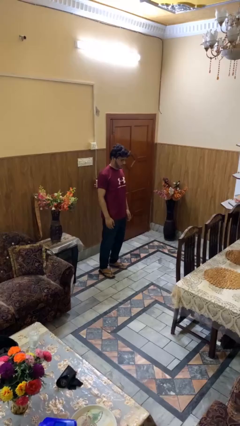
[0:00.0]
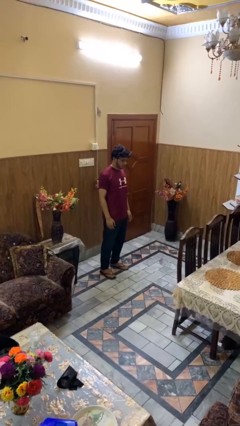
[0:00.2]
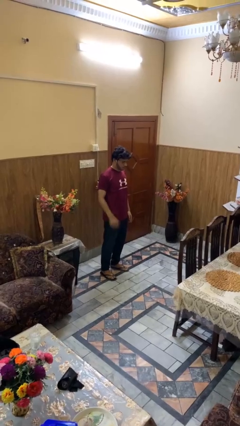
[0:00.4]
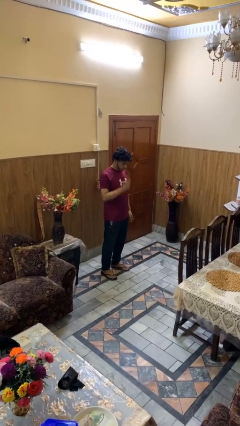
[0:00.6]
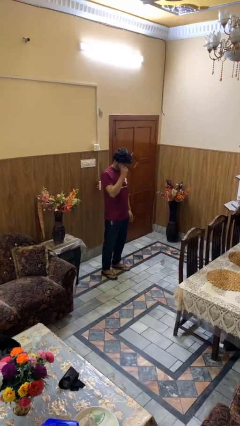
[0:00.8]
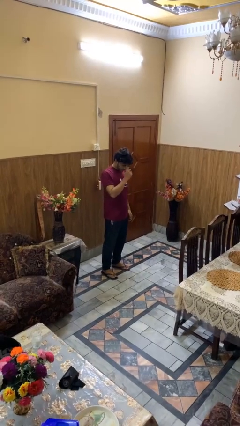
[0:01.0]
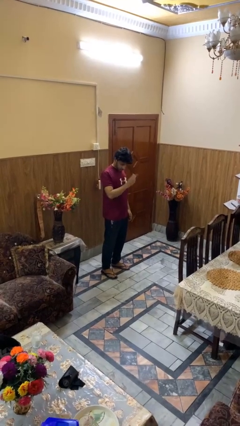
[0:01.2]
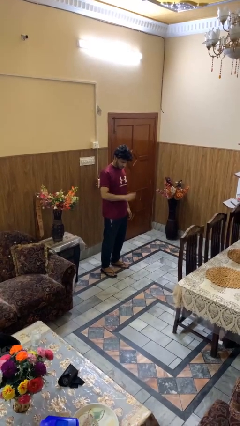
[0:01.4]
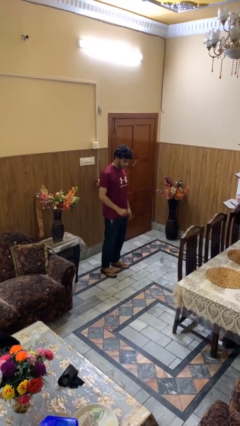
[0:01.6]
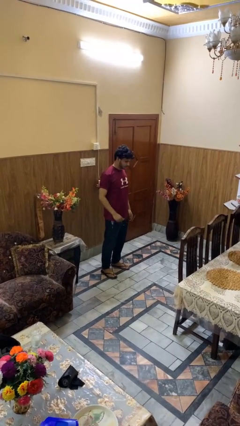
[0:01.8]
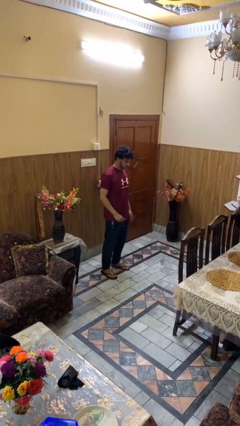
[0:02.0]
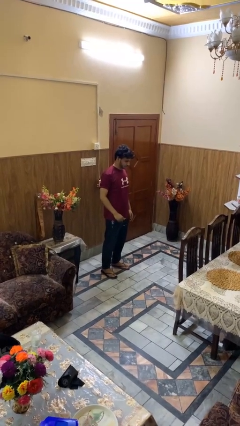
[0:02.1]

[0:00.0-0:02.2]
person takes off glasses

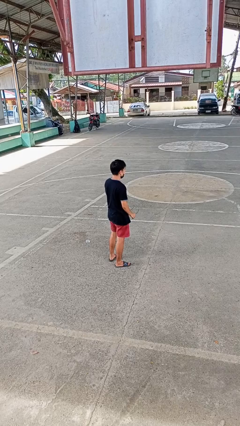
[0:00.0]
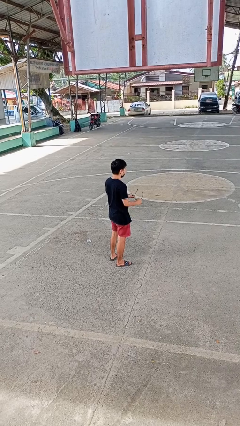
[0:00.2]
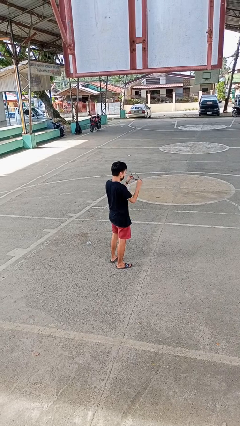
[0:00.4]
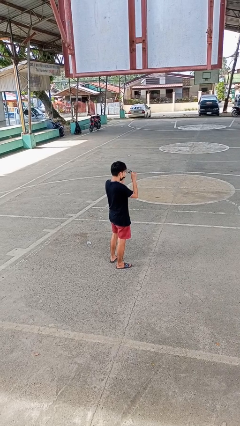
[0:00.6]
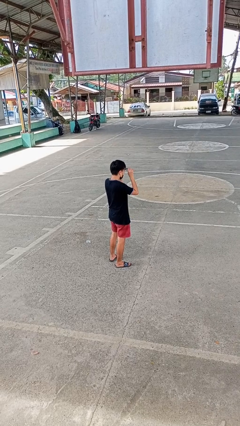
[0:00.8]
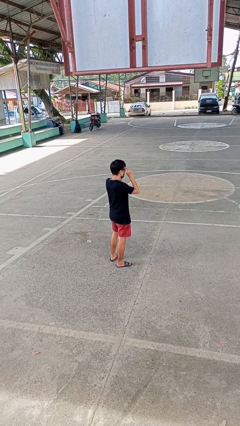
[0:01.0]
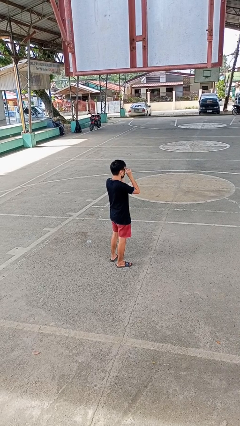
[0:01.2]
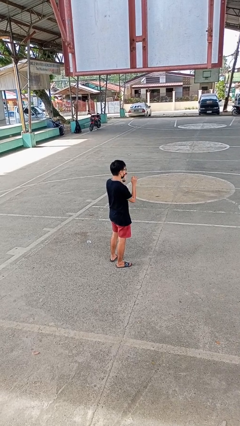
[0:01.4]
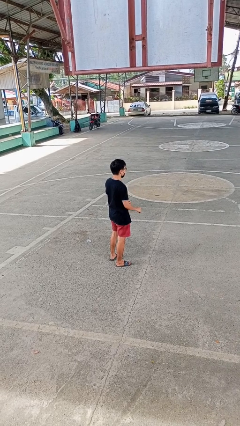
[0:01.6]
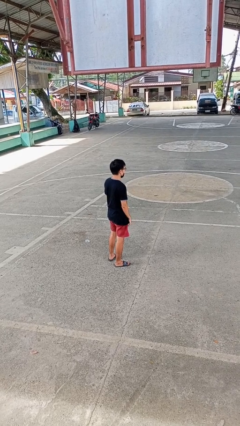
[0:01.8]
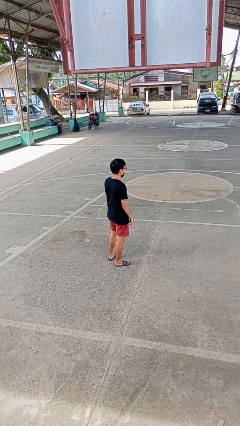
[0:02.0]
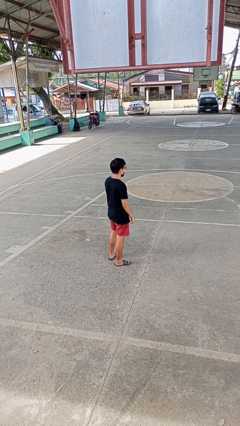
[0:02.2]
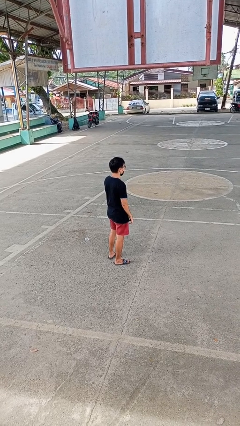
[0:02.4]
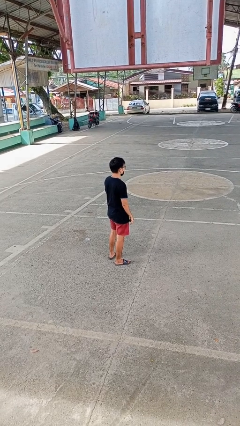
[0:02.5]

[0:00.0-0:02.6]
person puts on glasses

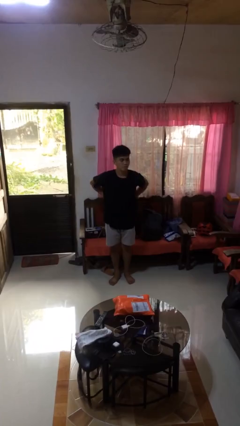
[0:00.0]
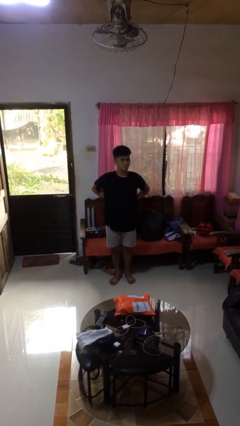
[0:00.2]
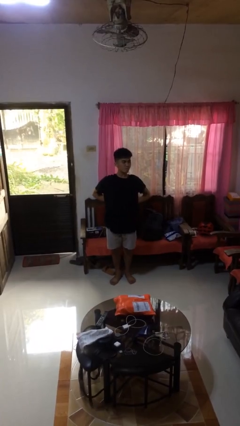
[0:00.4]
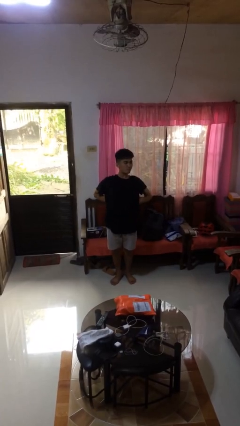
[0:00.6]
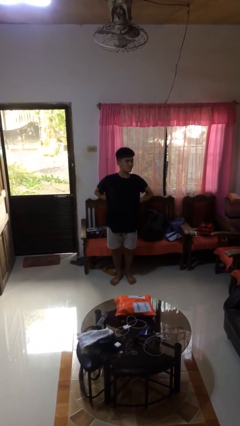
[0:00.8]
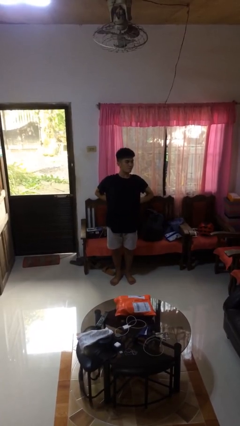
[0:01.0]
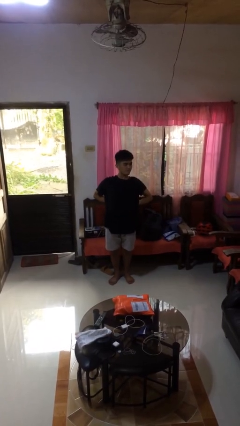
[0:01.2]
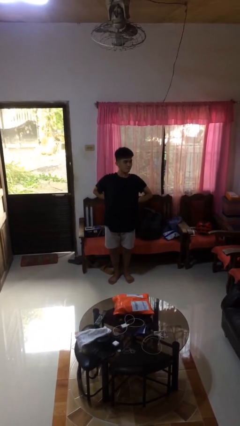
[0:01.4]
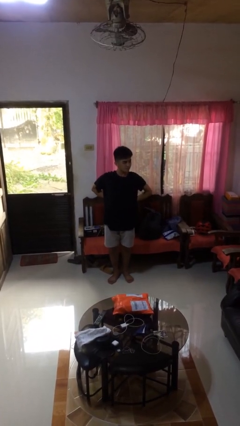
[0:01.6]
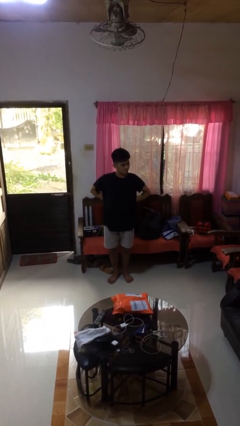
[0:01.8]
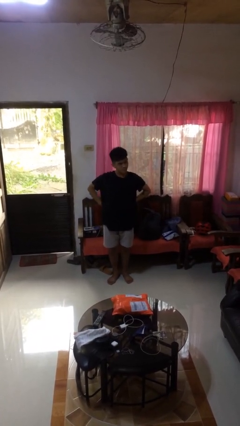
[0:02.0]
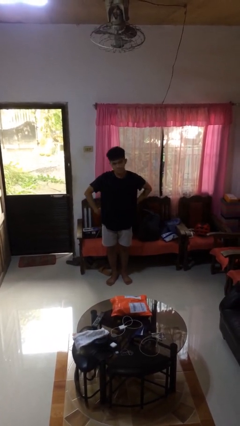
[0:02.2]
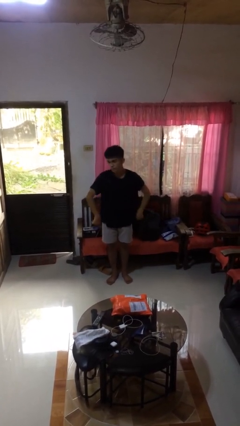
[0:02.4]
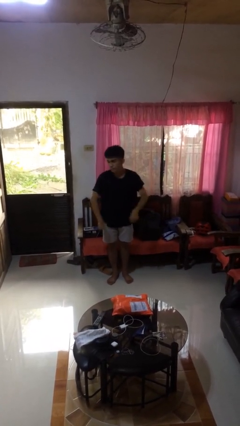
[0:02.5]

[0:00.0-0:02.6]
person stretches back

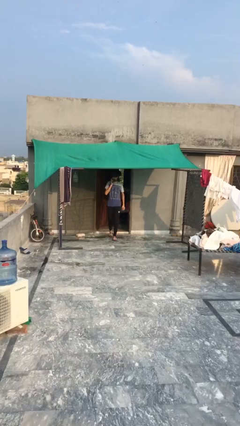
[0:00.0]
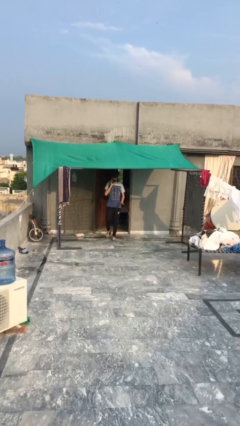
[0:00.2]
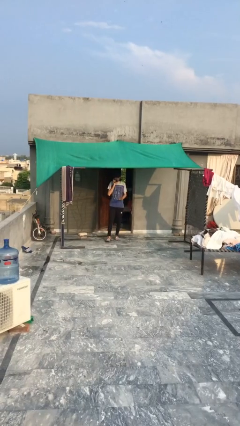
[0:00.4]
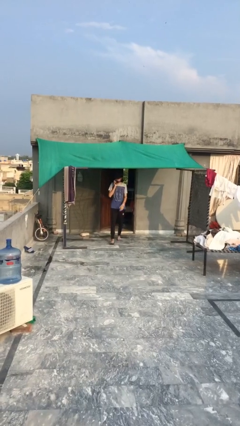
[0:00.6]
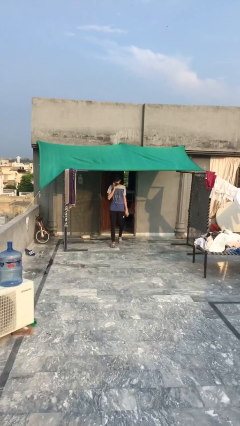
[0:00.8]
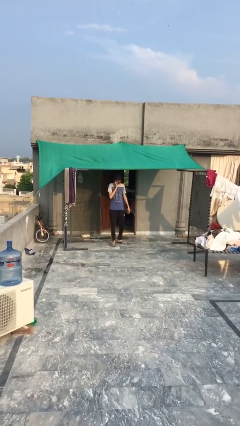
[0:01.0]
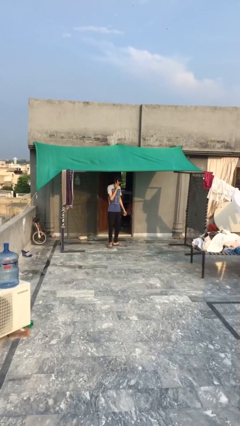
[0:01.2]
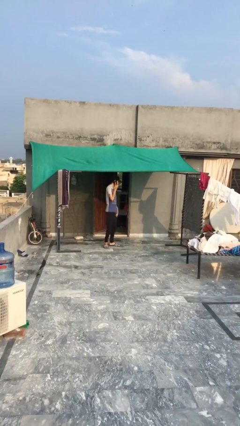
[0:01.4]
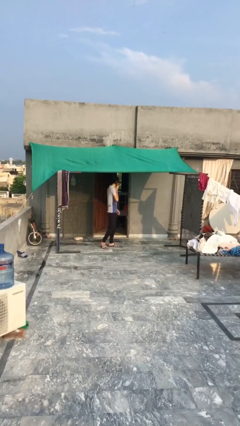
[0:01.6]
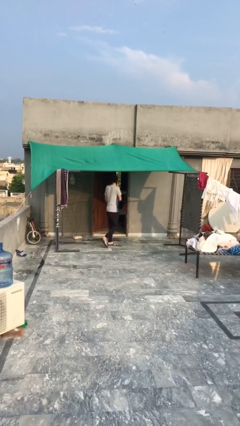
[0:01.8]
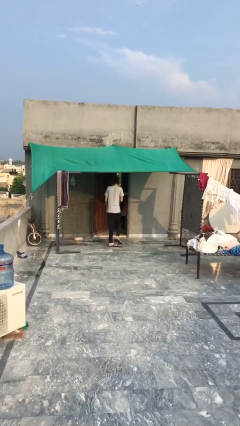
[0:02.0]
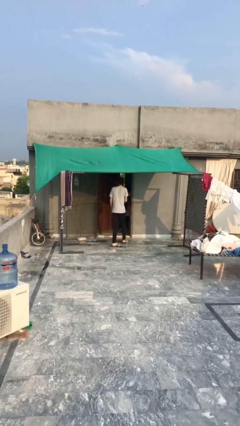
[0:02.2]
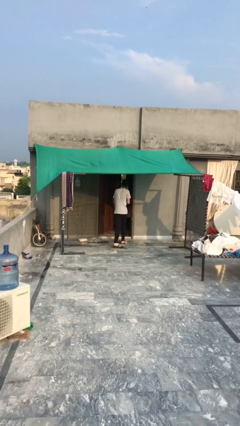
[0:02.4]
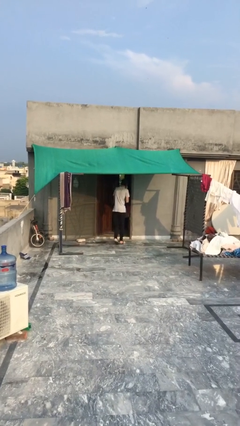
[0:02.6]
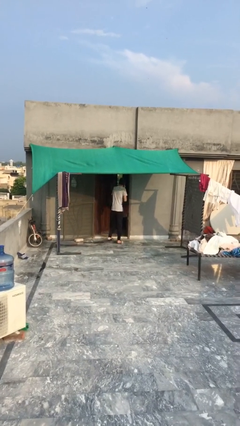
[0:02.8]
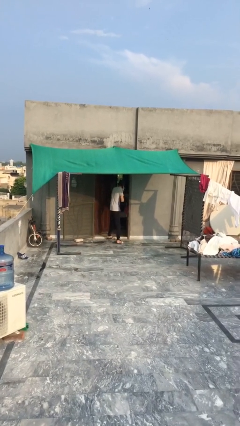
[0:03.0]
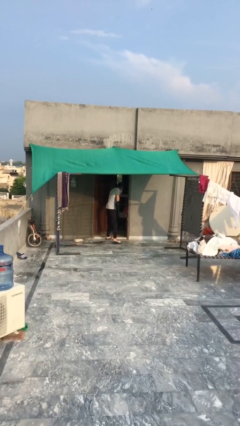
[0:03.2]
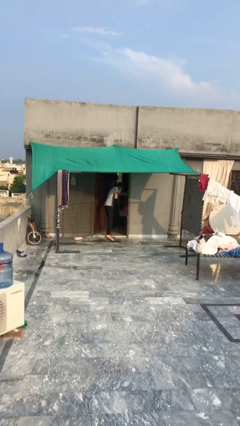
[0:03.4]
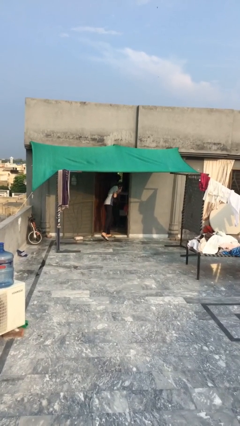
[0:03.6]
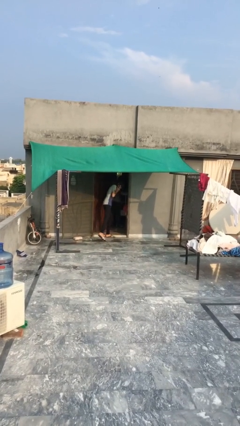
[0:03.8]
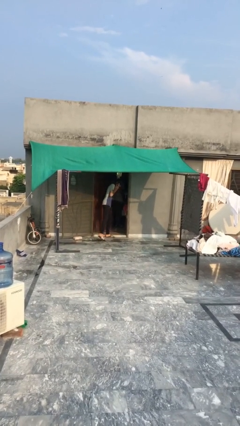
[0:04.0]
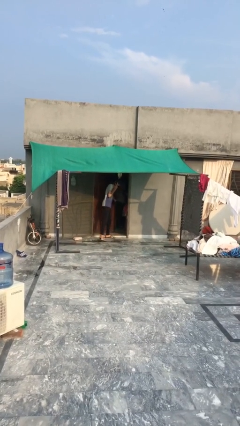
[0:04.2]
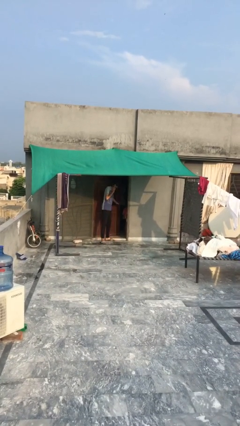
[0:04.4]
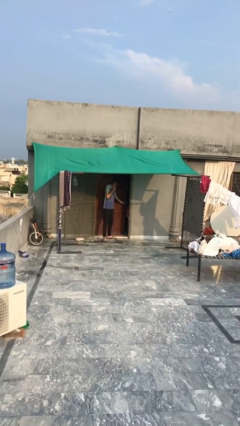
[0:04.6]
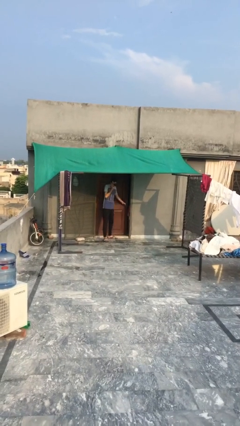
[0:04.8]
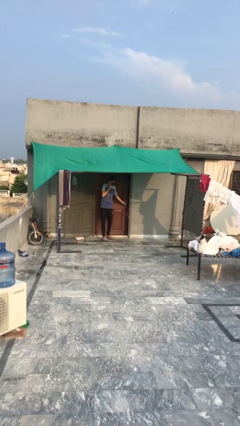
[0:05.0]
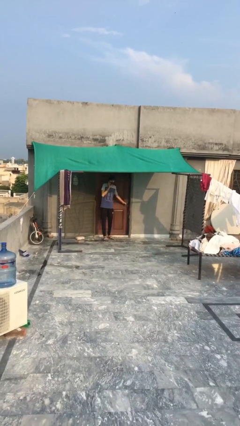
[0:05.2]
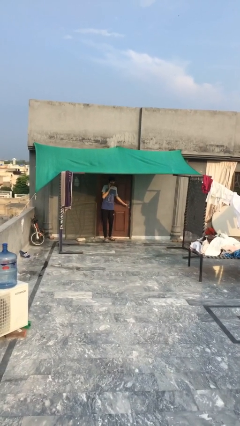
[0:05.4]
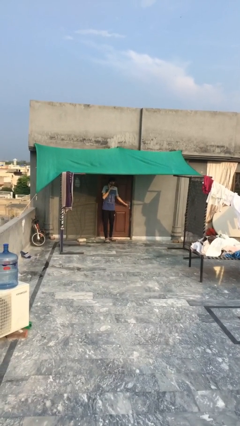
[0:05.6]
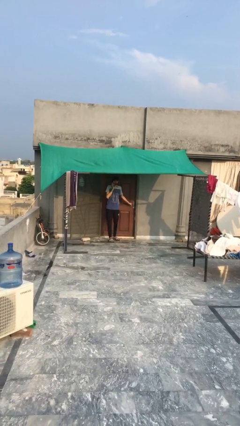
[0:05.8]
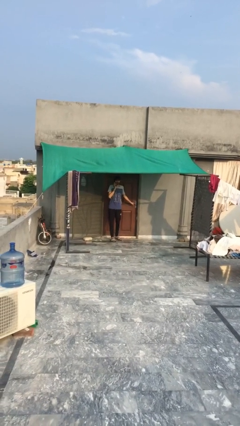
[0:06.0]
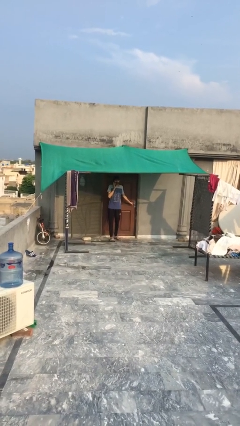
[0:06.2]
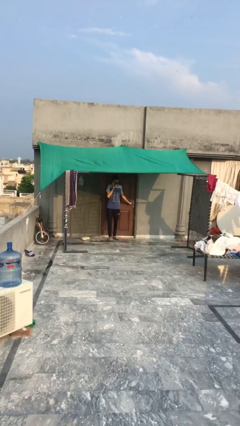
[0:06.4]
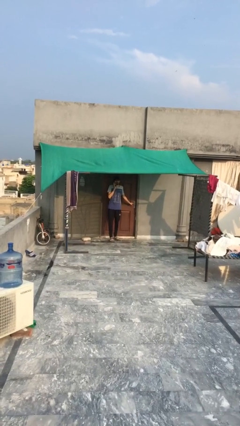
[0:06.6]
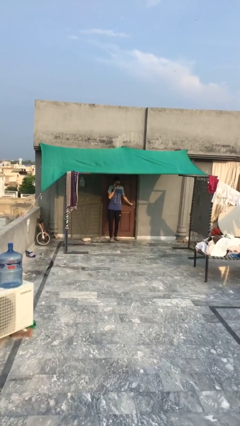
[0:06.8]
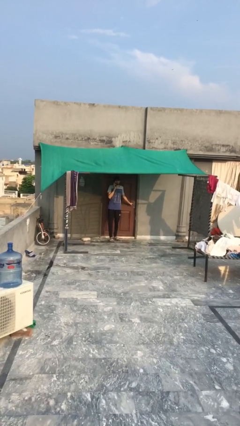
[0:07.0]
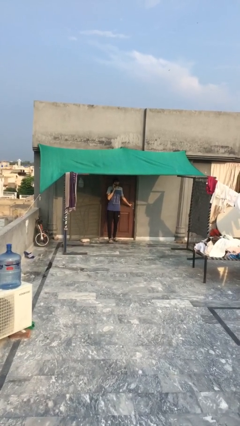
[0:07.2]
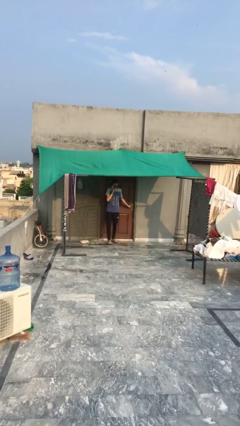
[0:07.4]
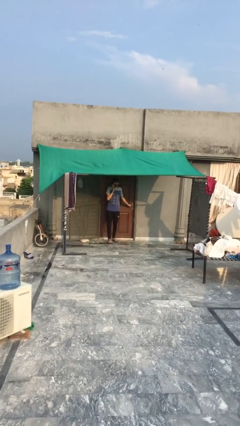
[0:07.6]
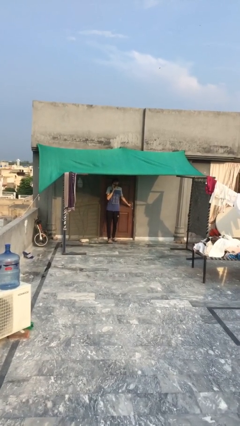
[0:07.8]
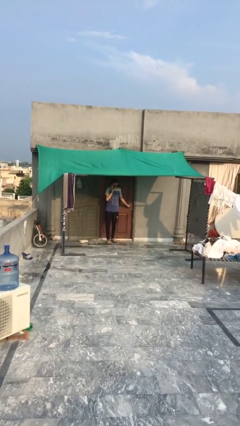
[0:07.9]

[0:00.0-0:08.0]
person closes facility door

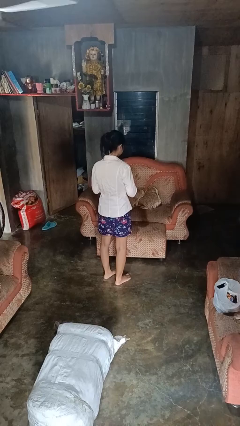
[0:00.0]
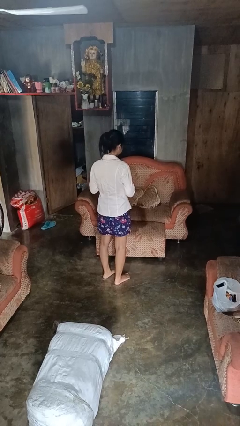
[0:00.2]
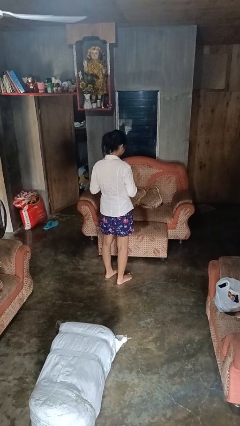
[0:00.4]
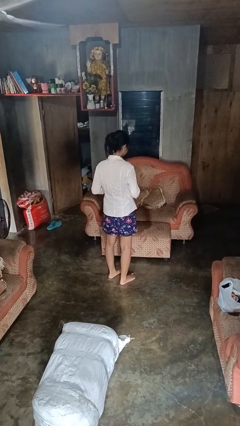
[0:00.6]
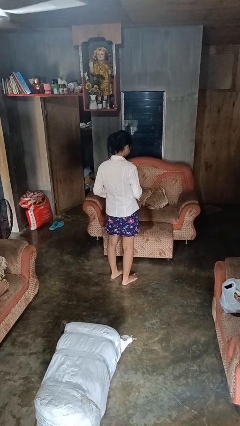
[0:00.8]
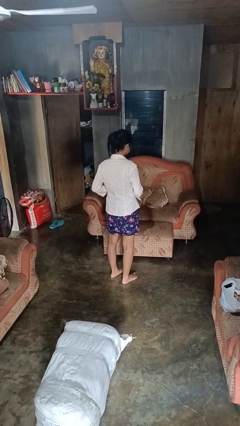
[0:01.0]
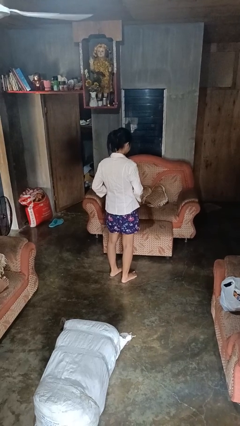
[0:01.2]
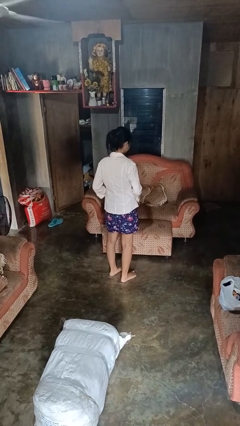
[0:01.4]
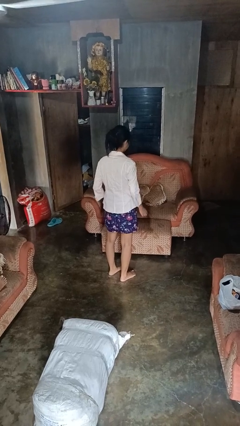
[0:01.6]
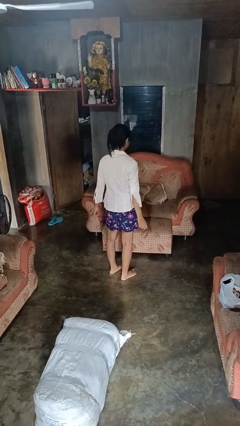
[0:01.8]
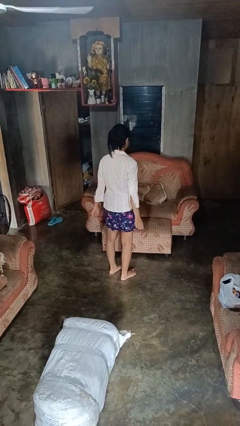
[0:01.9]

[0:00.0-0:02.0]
person unbuttons shirt

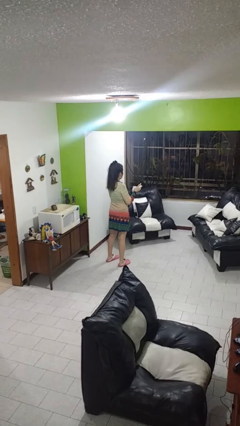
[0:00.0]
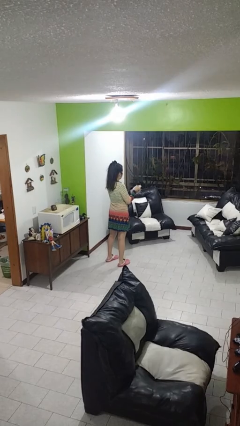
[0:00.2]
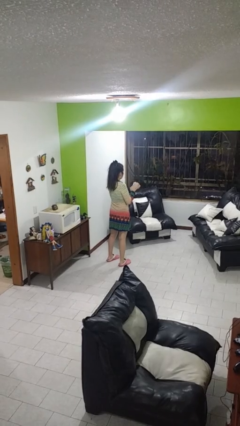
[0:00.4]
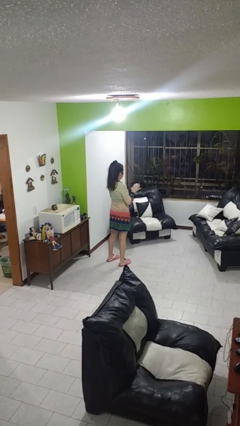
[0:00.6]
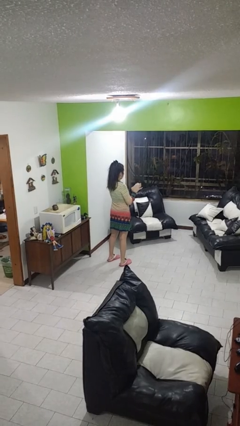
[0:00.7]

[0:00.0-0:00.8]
person crumples paper
